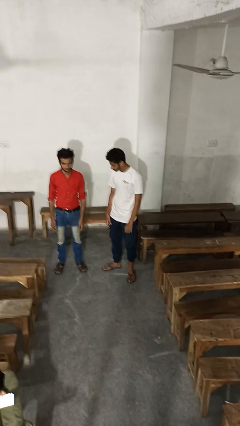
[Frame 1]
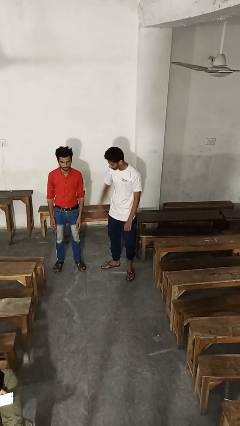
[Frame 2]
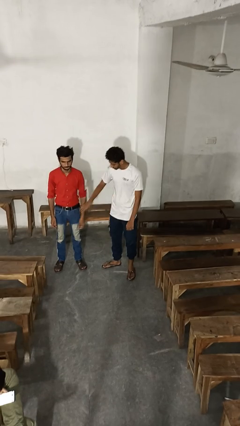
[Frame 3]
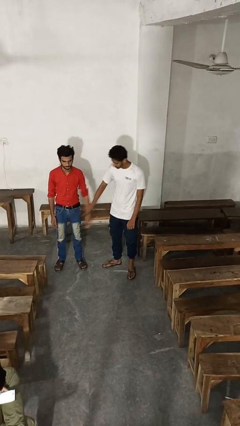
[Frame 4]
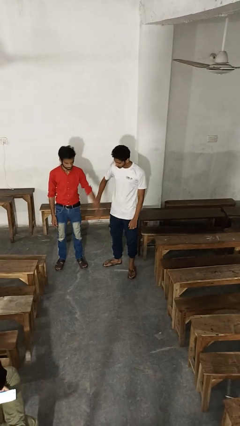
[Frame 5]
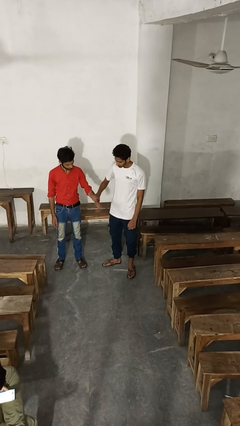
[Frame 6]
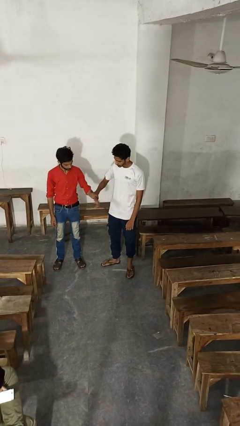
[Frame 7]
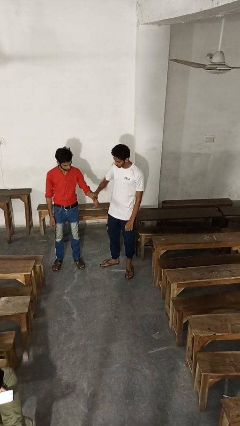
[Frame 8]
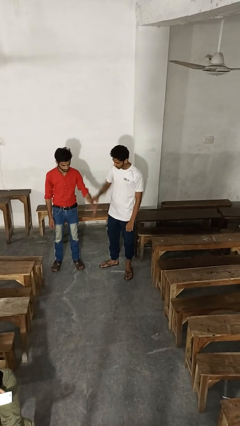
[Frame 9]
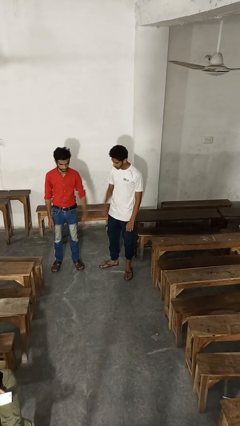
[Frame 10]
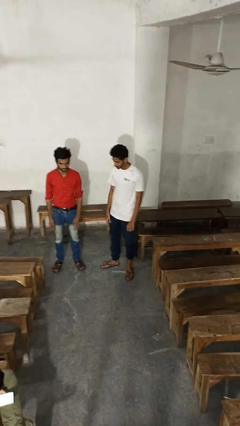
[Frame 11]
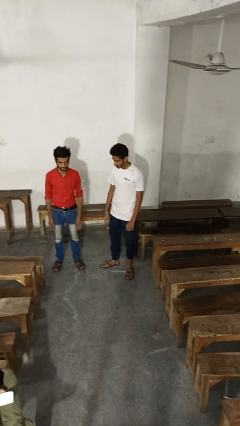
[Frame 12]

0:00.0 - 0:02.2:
person grabs person by forearm

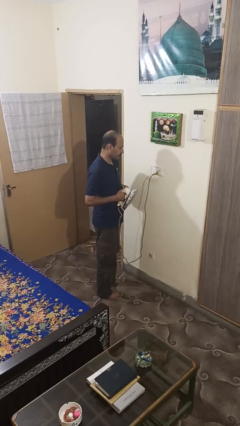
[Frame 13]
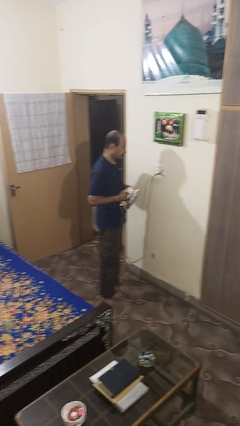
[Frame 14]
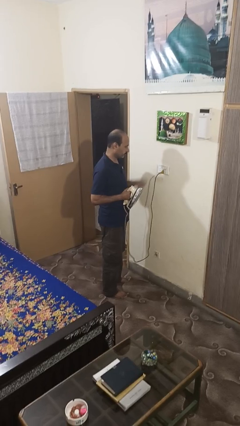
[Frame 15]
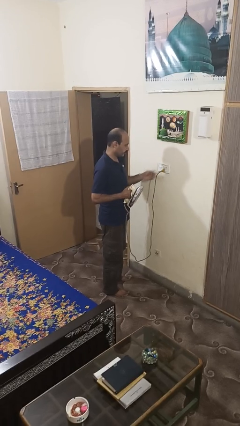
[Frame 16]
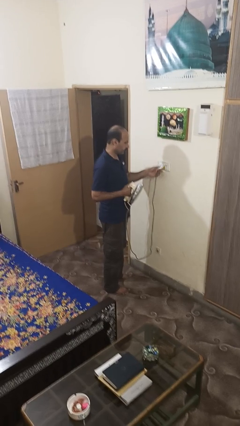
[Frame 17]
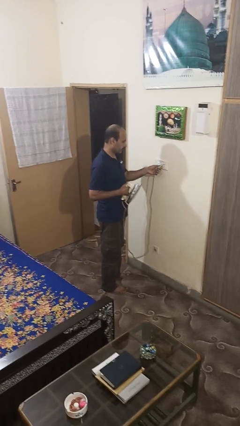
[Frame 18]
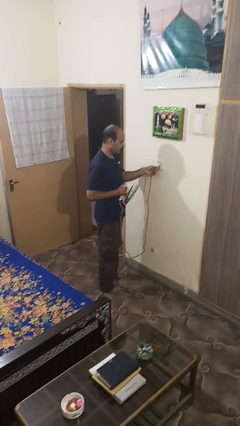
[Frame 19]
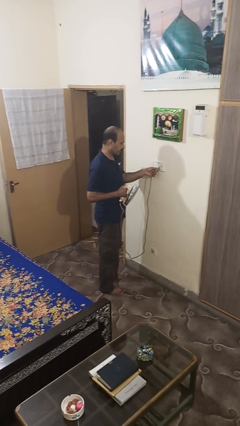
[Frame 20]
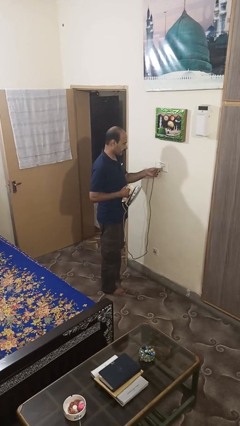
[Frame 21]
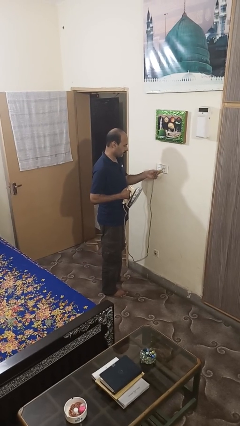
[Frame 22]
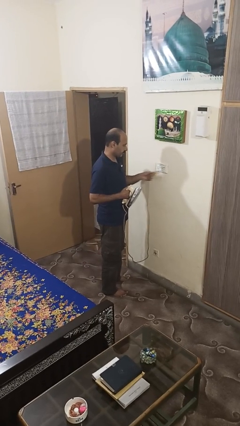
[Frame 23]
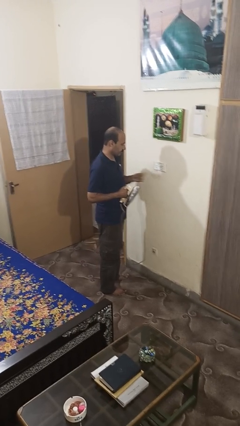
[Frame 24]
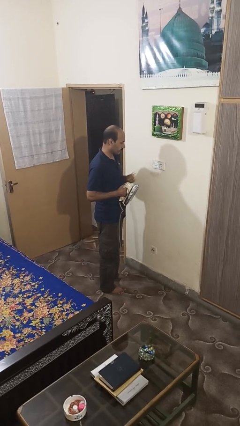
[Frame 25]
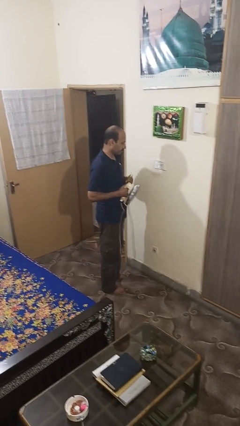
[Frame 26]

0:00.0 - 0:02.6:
person unplugs from electrical socket

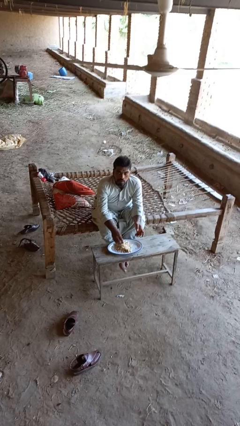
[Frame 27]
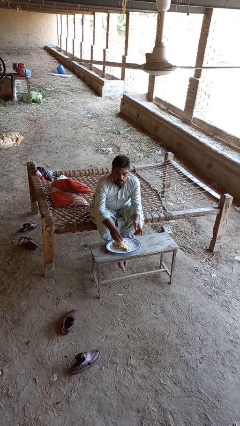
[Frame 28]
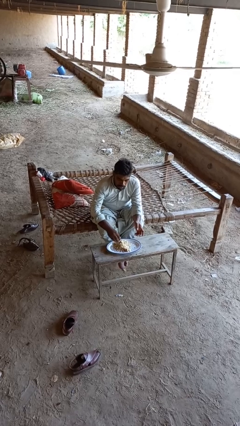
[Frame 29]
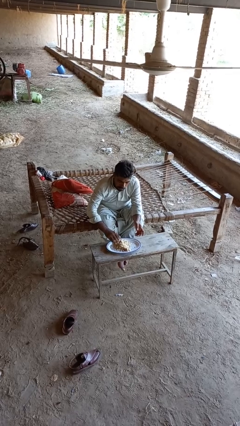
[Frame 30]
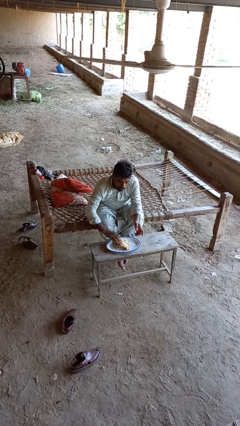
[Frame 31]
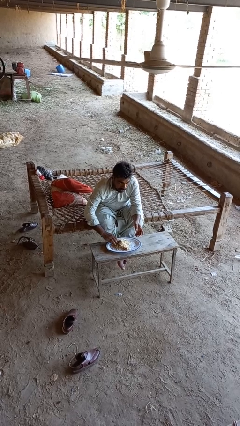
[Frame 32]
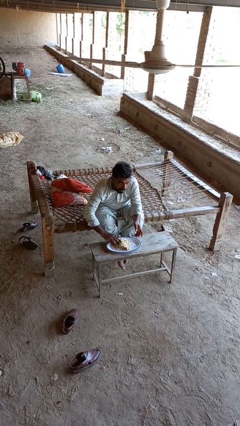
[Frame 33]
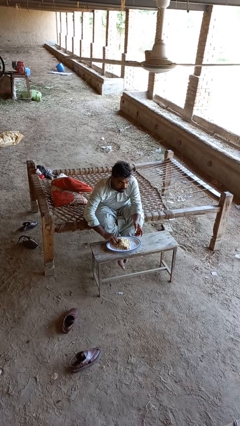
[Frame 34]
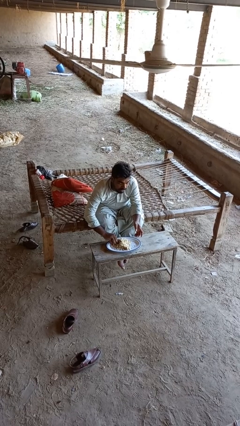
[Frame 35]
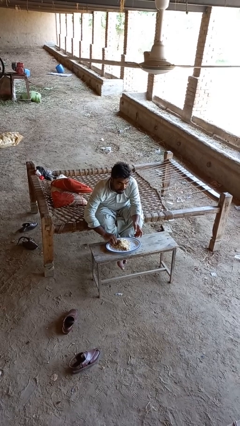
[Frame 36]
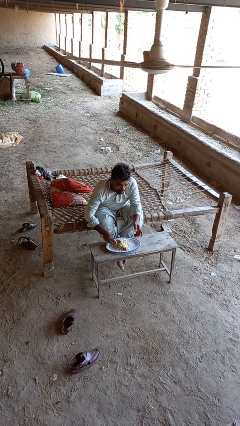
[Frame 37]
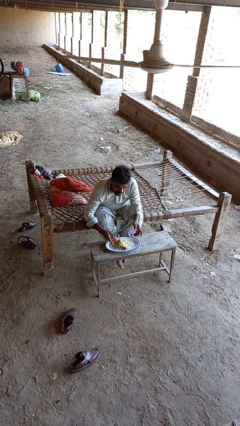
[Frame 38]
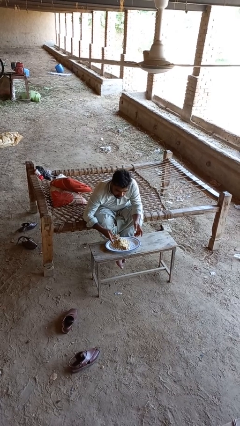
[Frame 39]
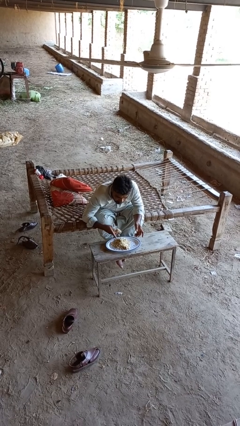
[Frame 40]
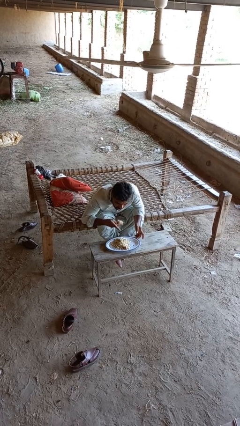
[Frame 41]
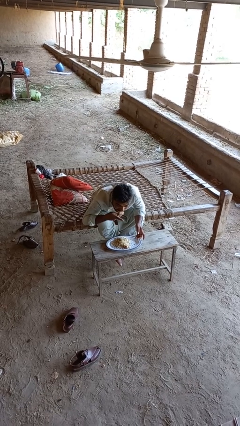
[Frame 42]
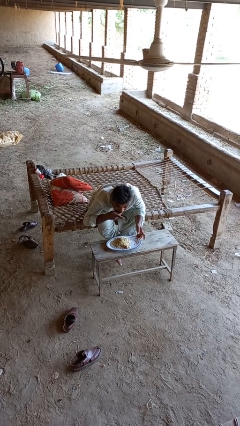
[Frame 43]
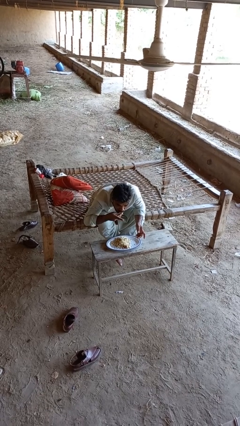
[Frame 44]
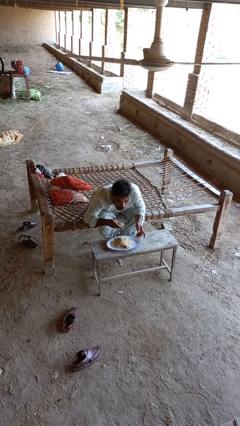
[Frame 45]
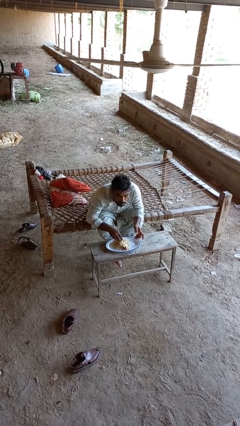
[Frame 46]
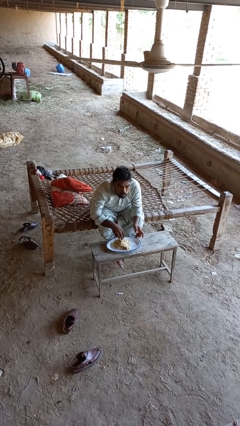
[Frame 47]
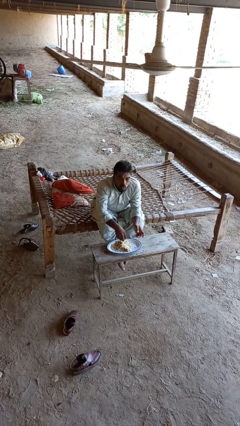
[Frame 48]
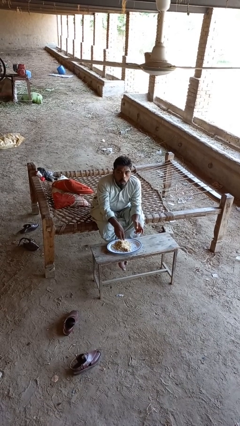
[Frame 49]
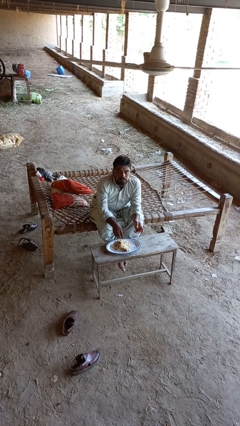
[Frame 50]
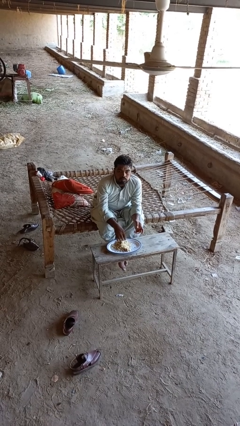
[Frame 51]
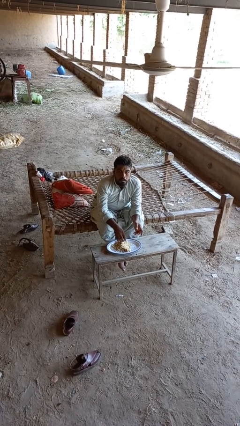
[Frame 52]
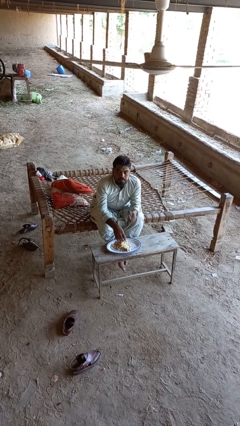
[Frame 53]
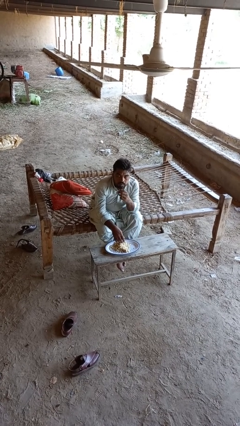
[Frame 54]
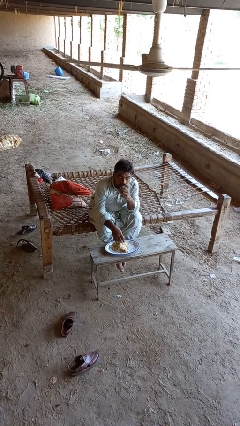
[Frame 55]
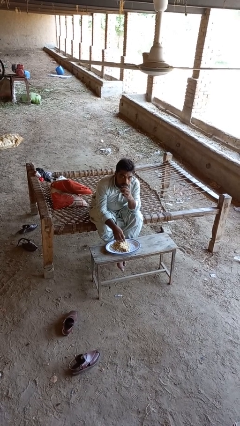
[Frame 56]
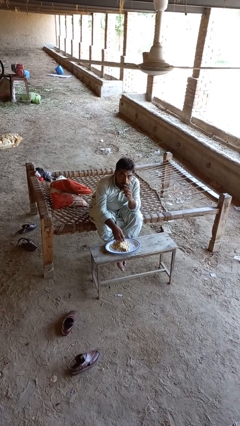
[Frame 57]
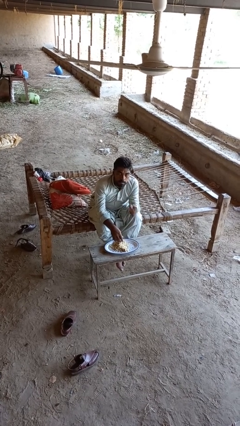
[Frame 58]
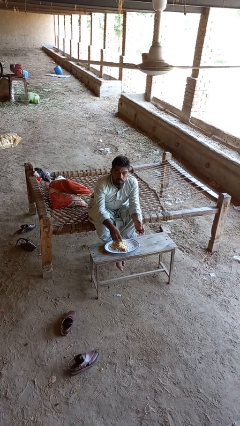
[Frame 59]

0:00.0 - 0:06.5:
person eats with hands

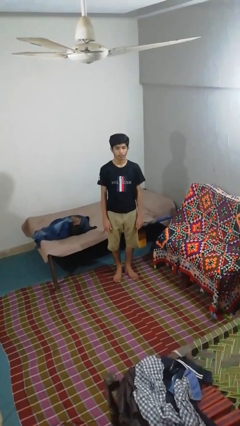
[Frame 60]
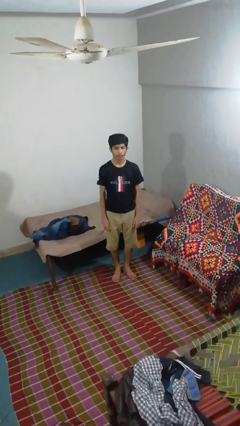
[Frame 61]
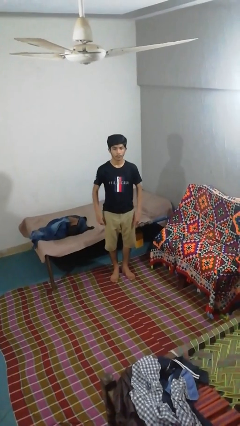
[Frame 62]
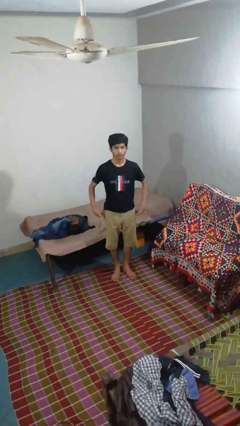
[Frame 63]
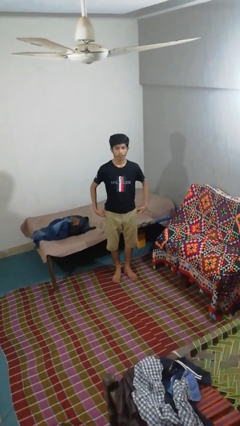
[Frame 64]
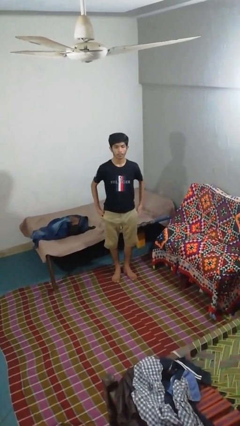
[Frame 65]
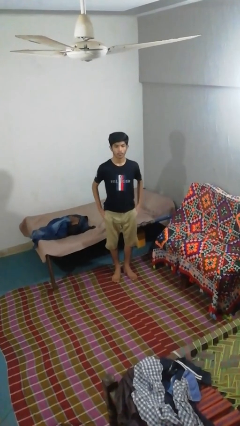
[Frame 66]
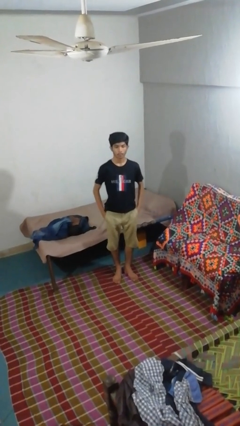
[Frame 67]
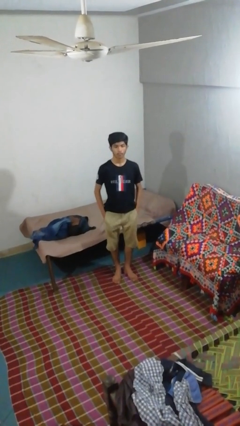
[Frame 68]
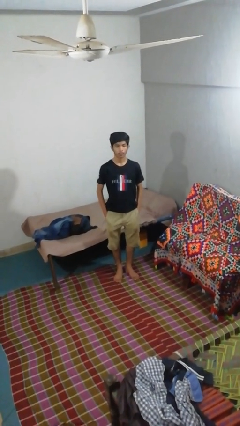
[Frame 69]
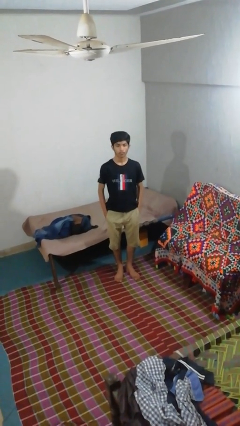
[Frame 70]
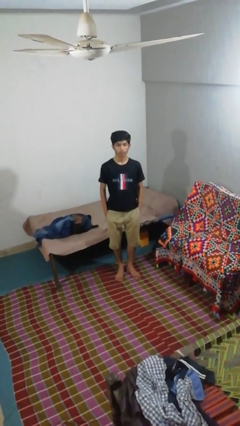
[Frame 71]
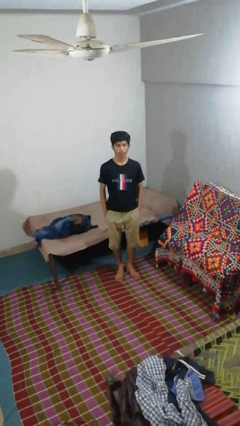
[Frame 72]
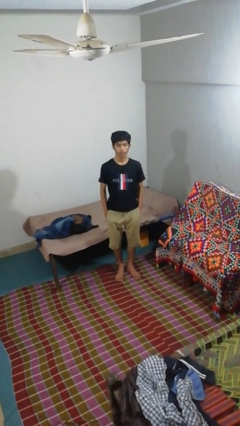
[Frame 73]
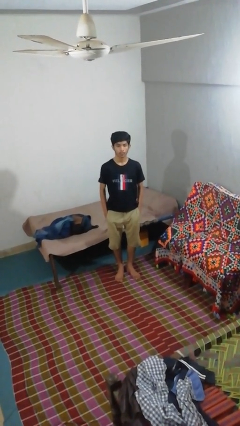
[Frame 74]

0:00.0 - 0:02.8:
person puts hands in back pockets

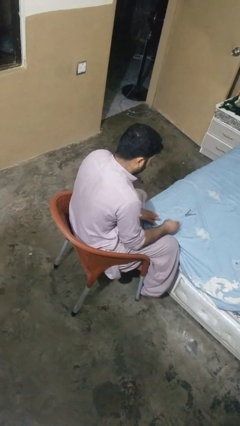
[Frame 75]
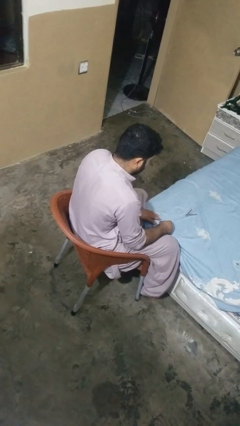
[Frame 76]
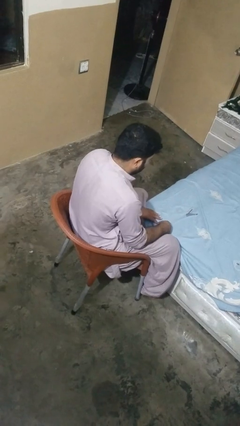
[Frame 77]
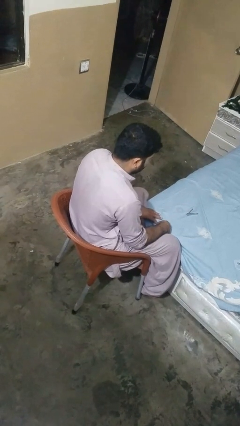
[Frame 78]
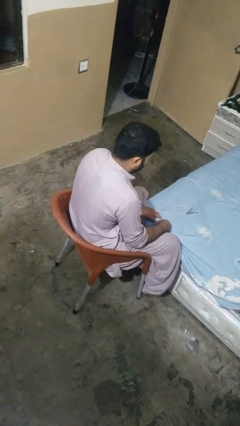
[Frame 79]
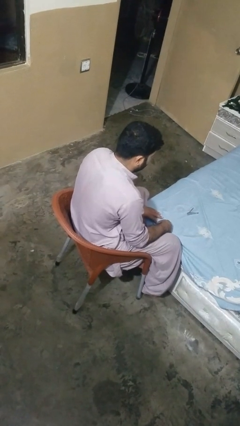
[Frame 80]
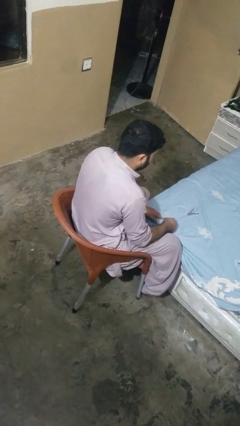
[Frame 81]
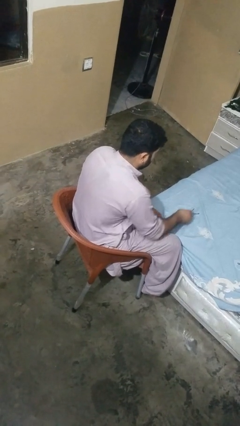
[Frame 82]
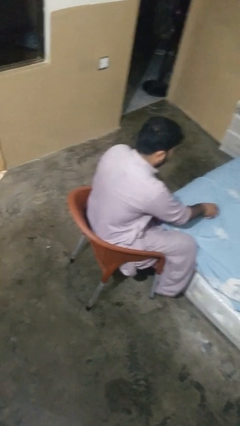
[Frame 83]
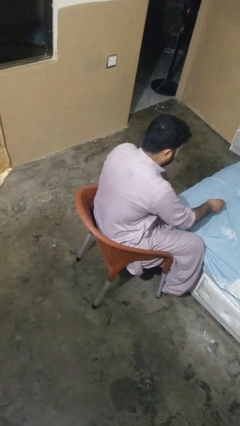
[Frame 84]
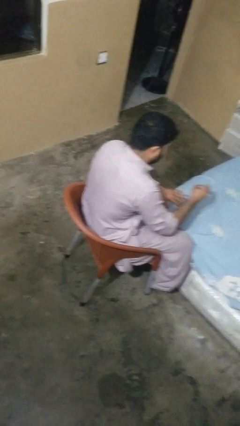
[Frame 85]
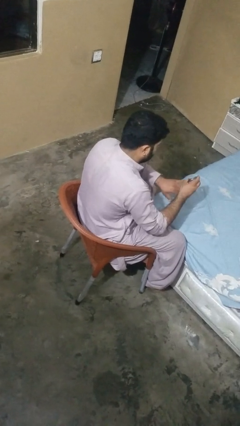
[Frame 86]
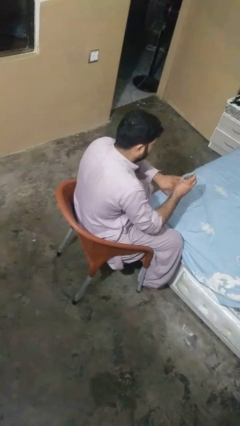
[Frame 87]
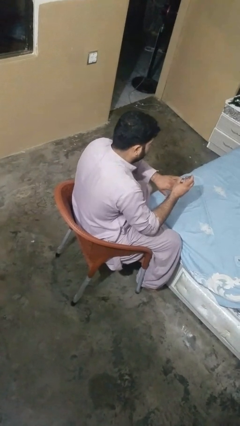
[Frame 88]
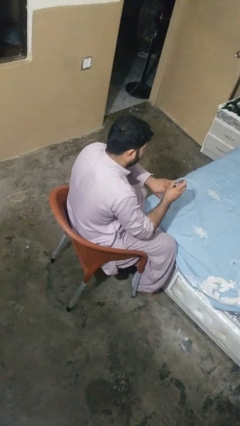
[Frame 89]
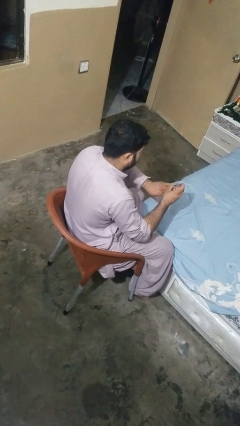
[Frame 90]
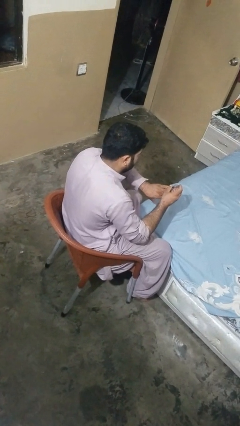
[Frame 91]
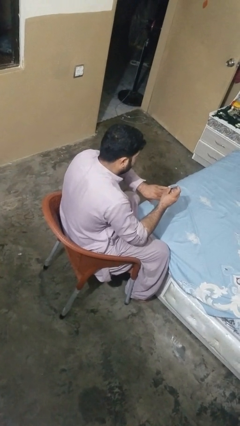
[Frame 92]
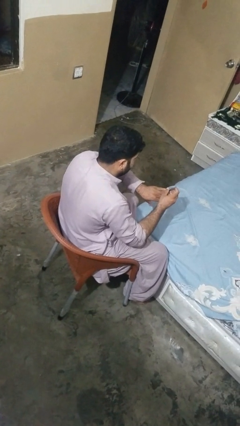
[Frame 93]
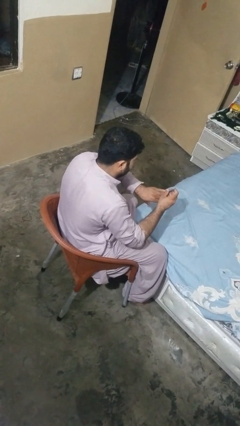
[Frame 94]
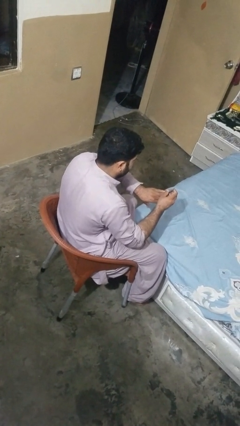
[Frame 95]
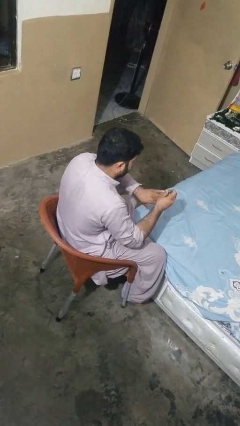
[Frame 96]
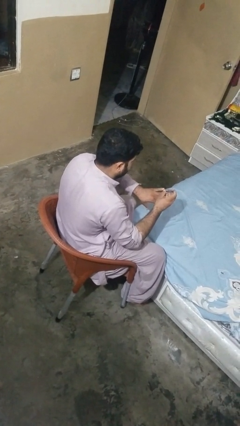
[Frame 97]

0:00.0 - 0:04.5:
person clips fingernails
